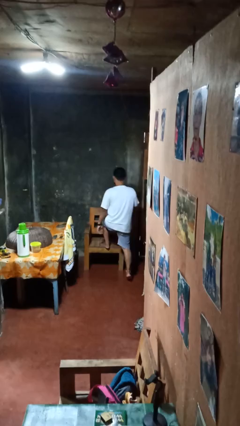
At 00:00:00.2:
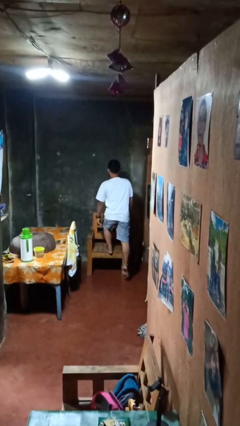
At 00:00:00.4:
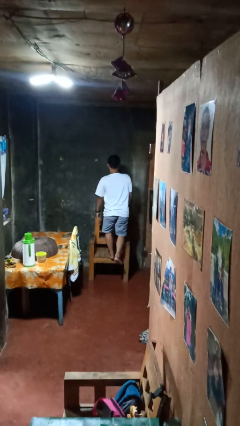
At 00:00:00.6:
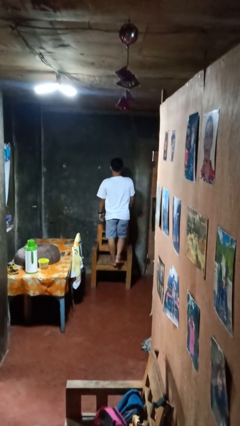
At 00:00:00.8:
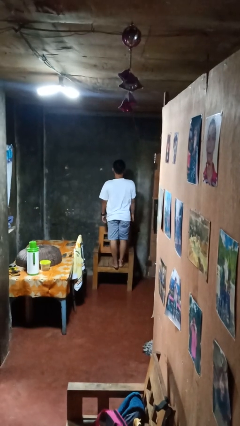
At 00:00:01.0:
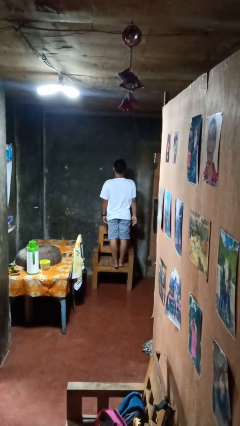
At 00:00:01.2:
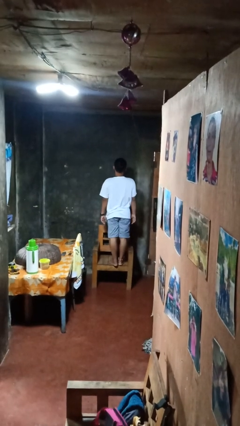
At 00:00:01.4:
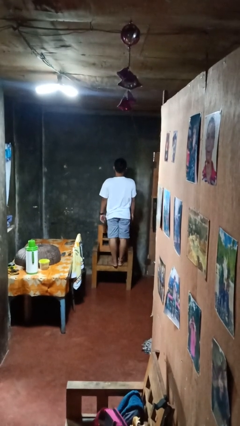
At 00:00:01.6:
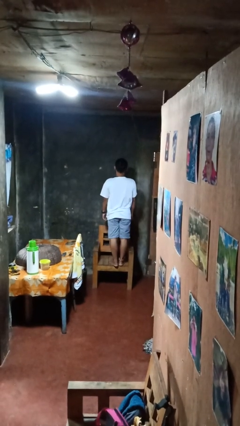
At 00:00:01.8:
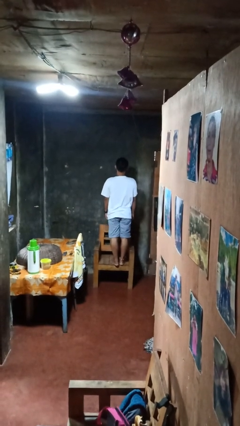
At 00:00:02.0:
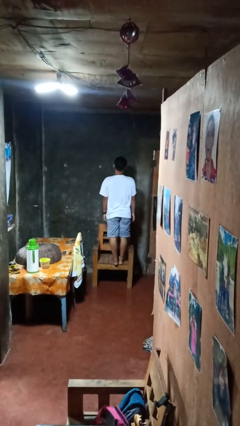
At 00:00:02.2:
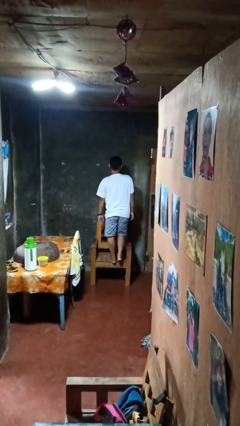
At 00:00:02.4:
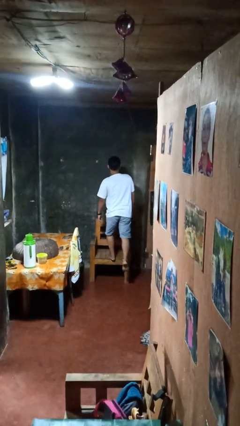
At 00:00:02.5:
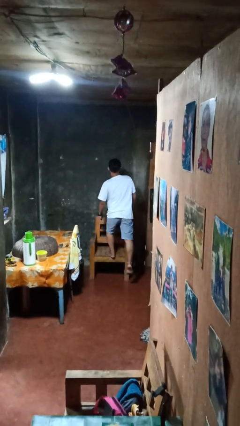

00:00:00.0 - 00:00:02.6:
person climbs on chair

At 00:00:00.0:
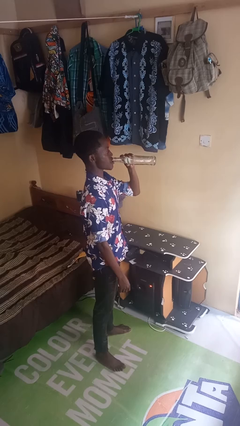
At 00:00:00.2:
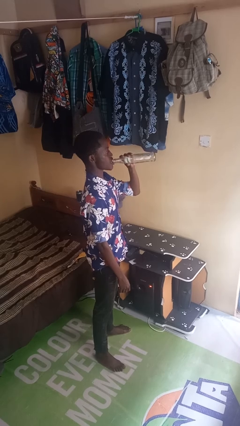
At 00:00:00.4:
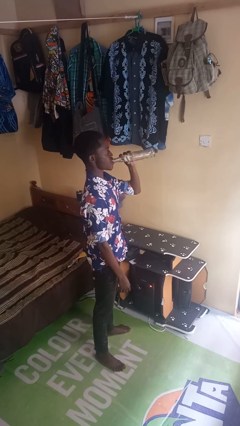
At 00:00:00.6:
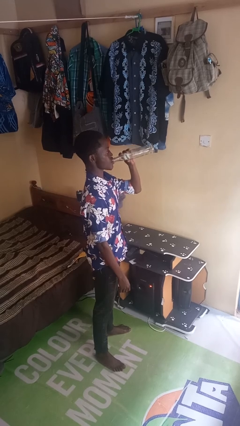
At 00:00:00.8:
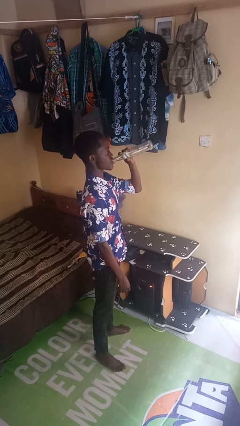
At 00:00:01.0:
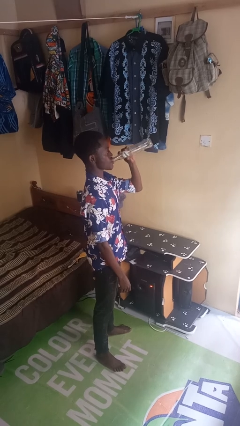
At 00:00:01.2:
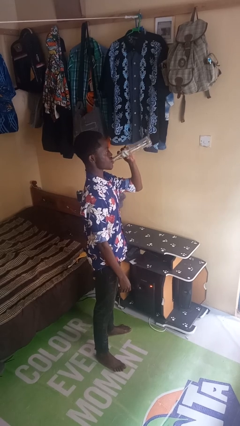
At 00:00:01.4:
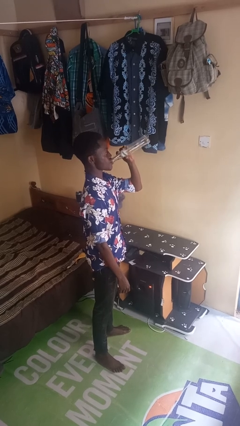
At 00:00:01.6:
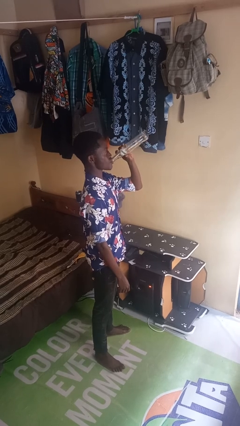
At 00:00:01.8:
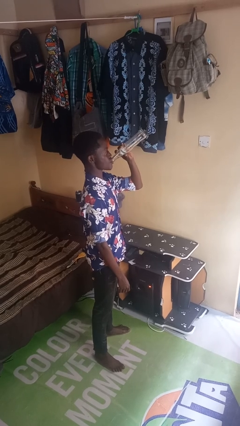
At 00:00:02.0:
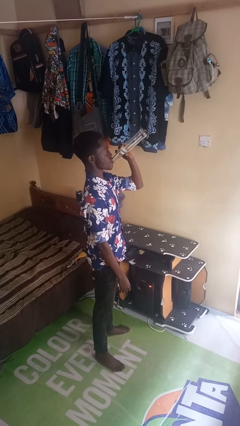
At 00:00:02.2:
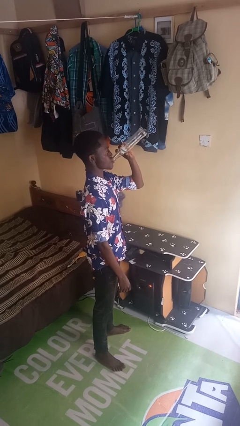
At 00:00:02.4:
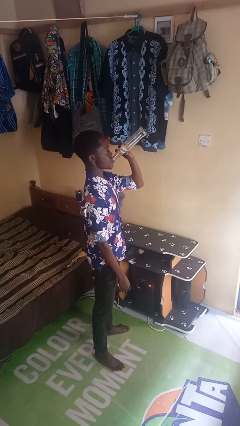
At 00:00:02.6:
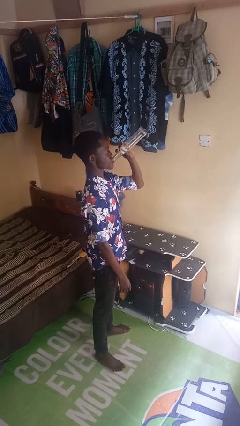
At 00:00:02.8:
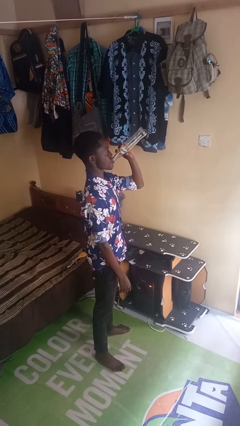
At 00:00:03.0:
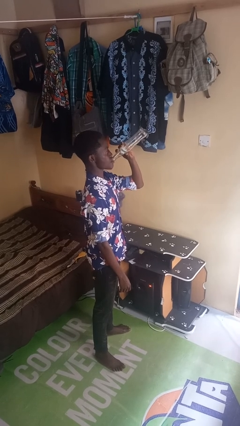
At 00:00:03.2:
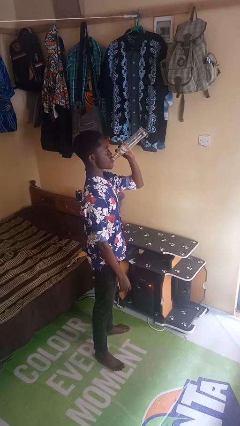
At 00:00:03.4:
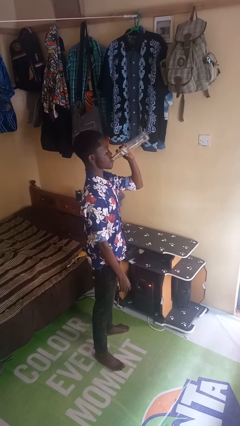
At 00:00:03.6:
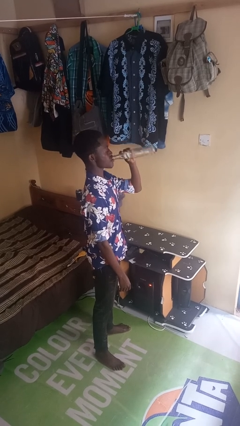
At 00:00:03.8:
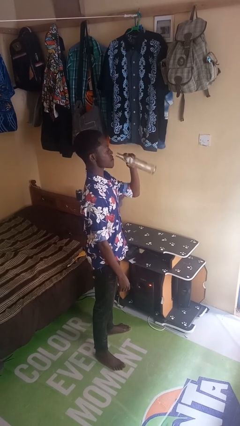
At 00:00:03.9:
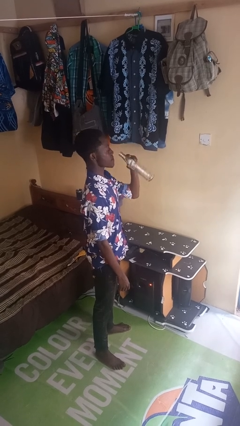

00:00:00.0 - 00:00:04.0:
person drinks from bottle

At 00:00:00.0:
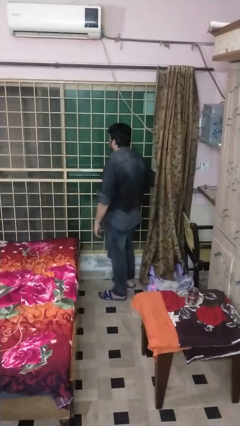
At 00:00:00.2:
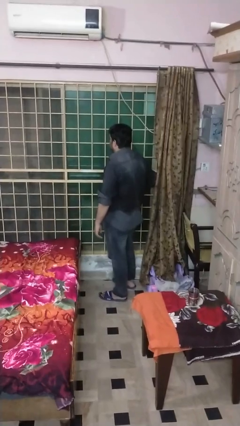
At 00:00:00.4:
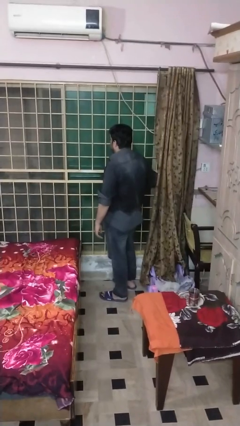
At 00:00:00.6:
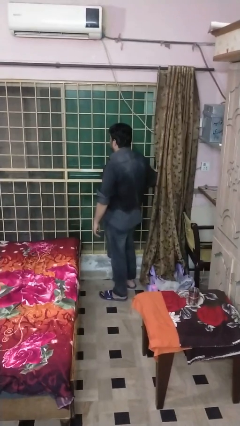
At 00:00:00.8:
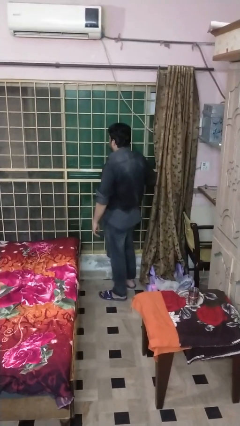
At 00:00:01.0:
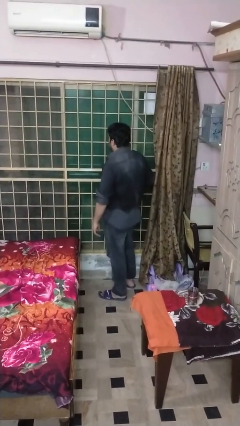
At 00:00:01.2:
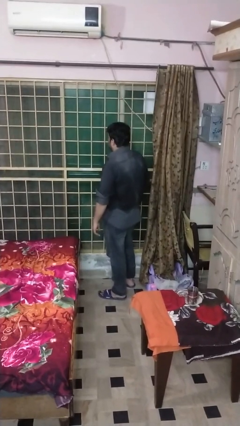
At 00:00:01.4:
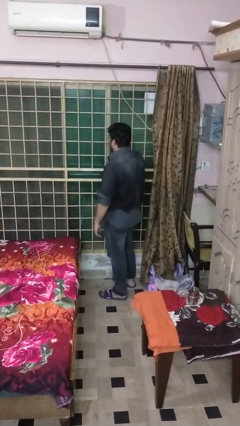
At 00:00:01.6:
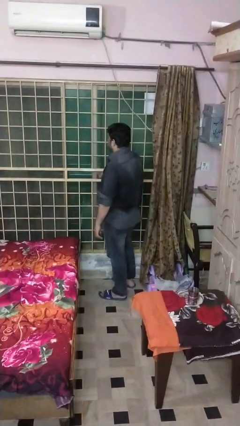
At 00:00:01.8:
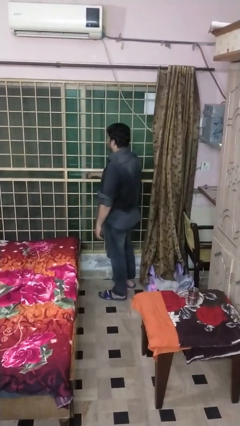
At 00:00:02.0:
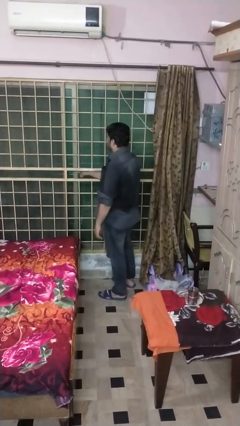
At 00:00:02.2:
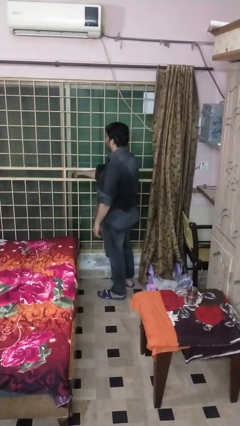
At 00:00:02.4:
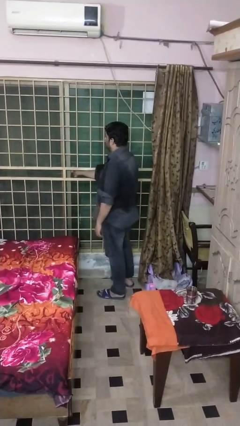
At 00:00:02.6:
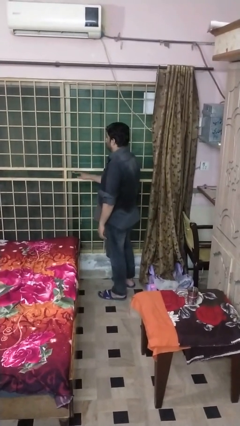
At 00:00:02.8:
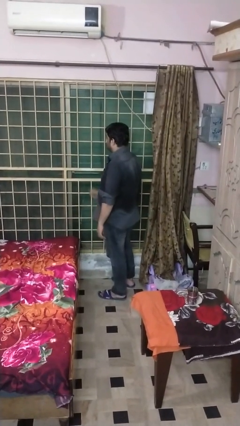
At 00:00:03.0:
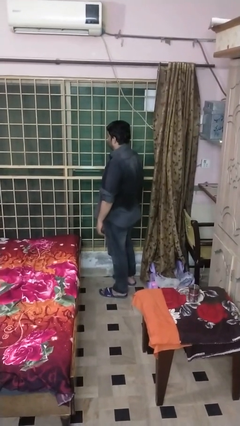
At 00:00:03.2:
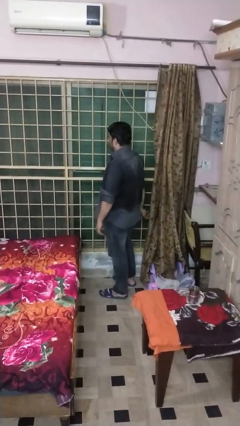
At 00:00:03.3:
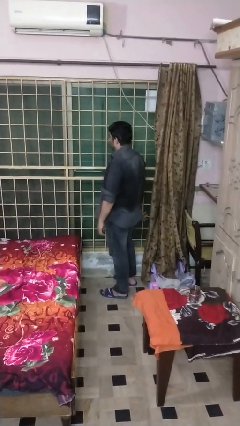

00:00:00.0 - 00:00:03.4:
person closes sliding door

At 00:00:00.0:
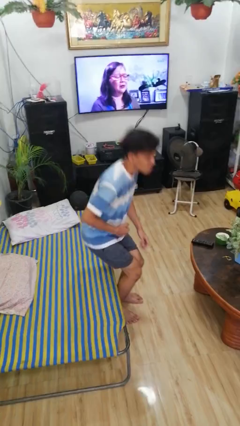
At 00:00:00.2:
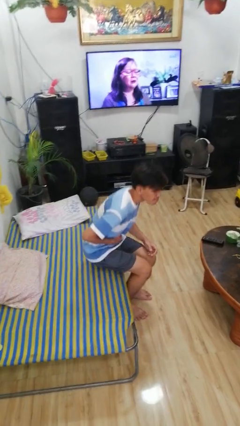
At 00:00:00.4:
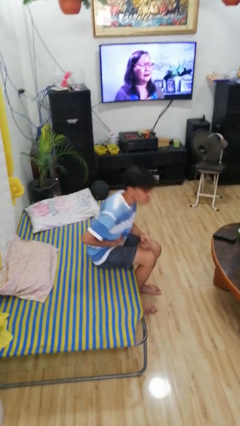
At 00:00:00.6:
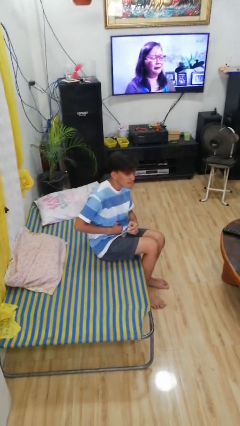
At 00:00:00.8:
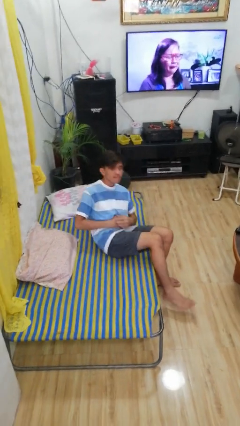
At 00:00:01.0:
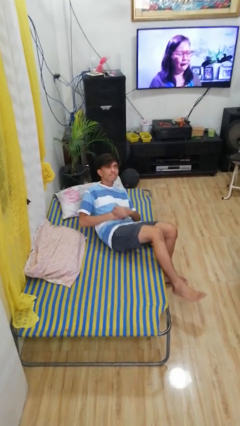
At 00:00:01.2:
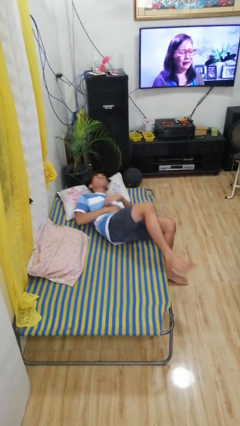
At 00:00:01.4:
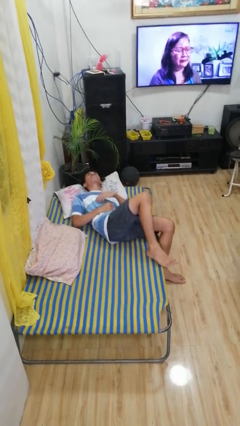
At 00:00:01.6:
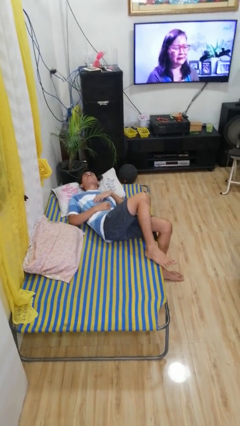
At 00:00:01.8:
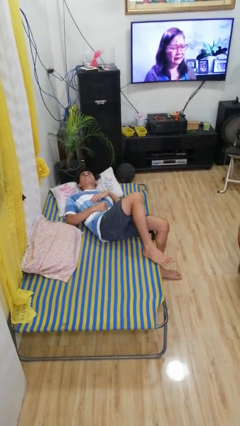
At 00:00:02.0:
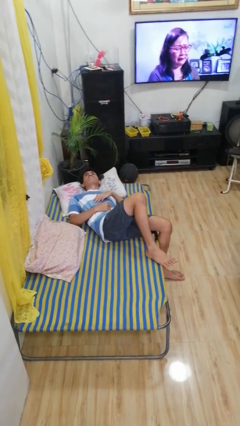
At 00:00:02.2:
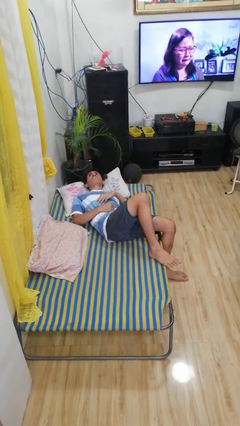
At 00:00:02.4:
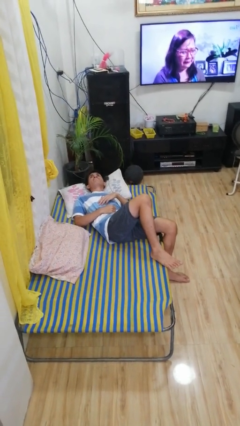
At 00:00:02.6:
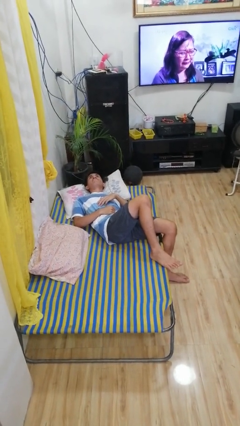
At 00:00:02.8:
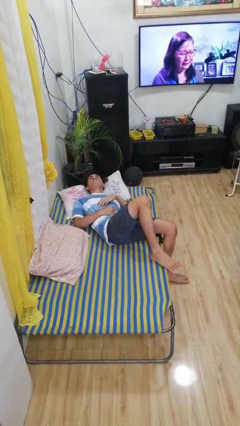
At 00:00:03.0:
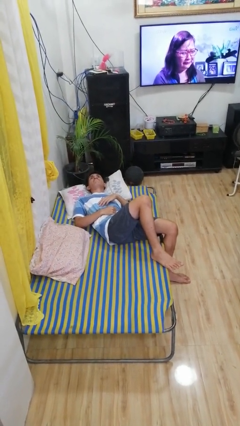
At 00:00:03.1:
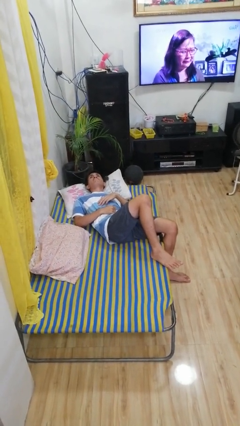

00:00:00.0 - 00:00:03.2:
person lies down on bed

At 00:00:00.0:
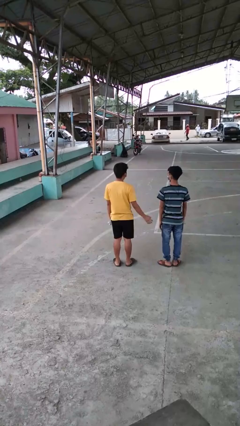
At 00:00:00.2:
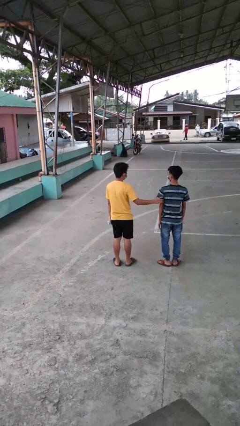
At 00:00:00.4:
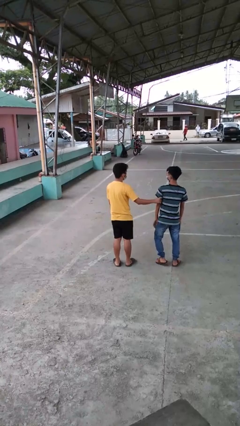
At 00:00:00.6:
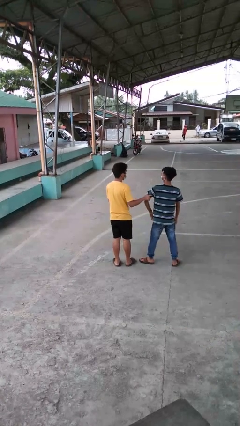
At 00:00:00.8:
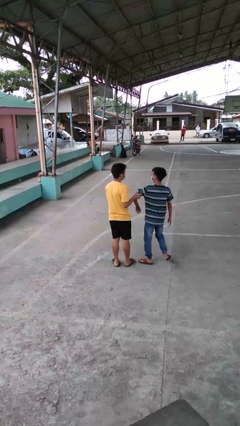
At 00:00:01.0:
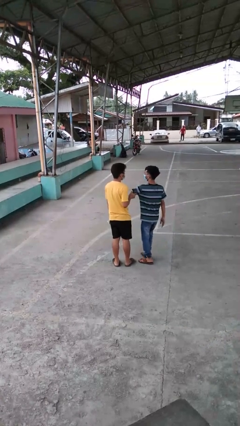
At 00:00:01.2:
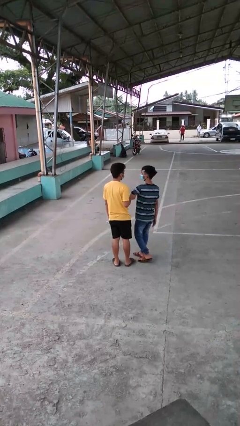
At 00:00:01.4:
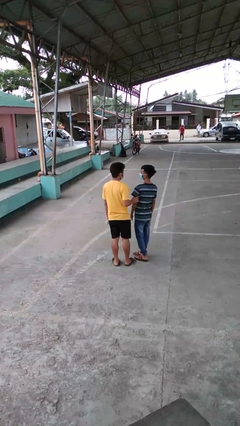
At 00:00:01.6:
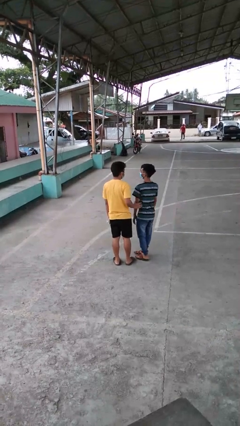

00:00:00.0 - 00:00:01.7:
person grabs person by bicep

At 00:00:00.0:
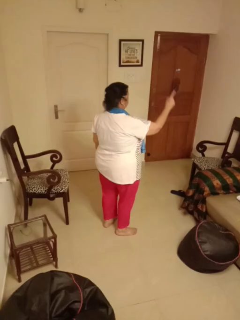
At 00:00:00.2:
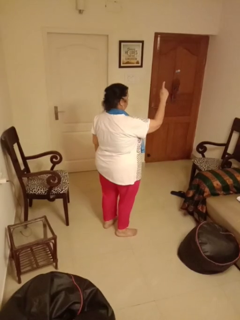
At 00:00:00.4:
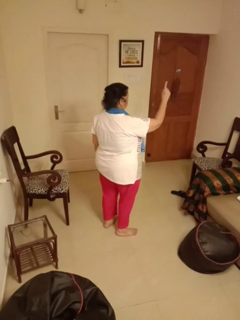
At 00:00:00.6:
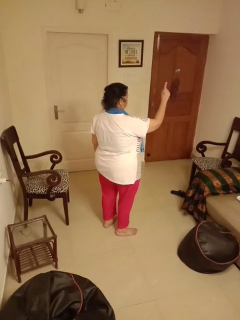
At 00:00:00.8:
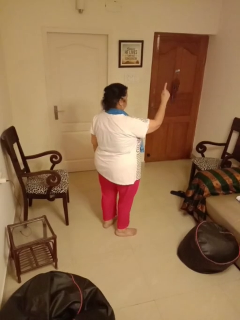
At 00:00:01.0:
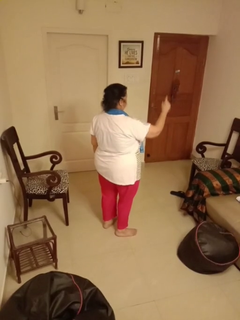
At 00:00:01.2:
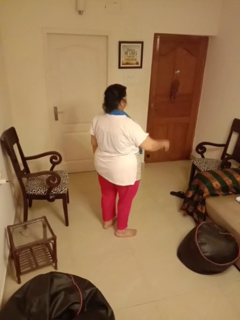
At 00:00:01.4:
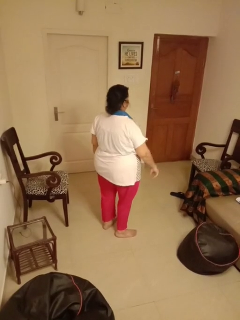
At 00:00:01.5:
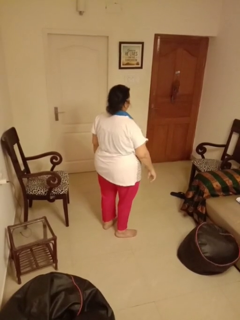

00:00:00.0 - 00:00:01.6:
person gestures number one

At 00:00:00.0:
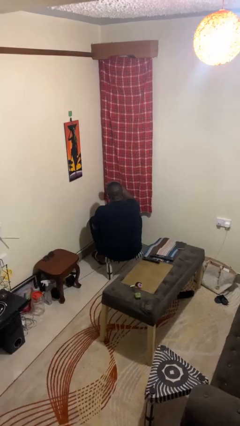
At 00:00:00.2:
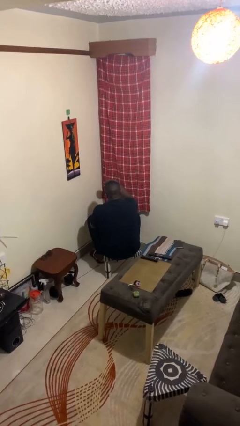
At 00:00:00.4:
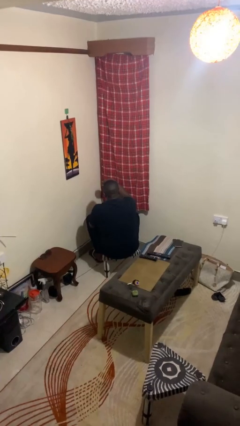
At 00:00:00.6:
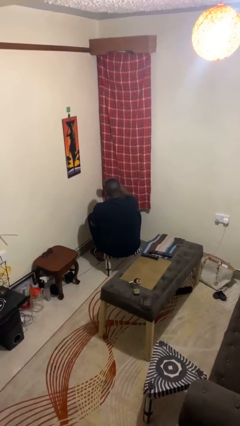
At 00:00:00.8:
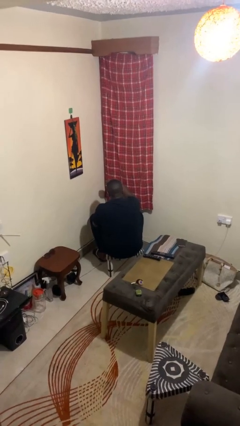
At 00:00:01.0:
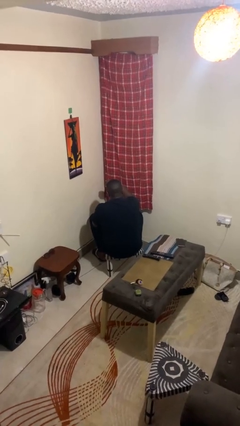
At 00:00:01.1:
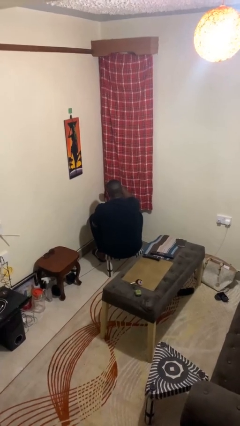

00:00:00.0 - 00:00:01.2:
person gestures swipe down
